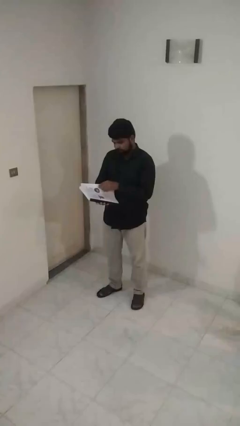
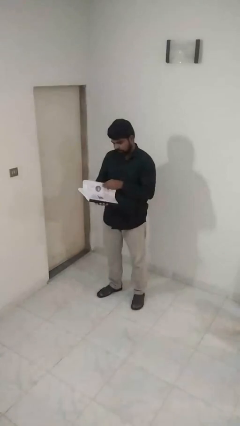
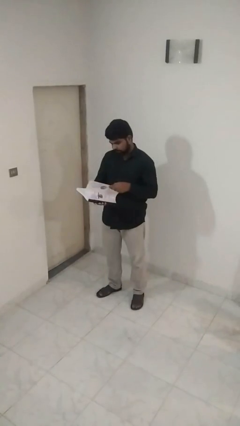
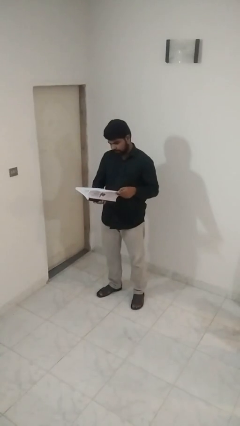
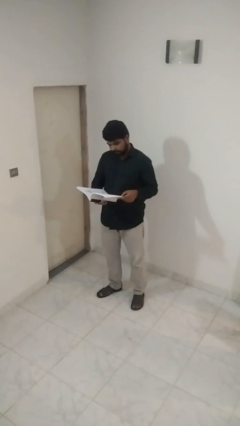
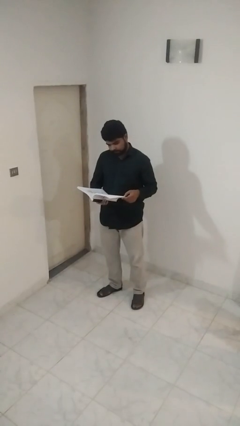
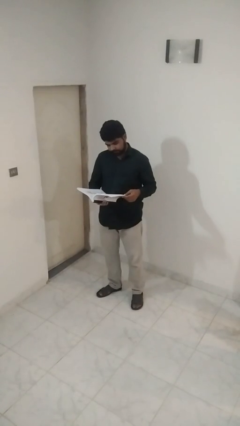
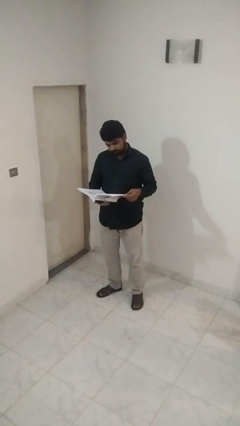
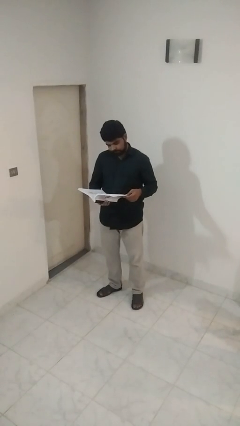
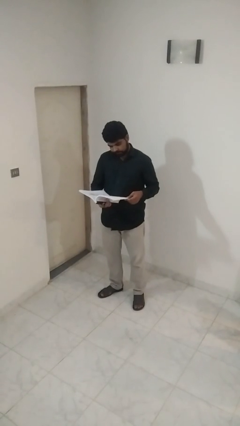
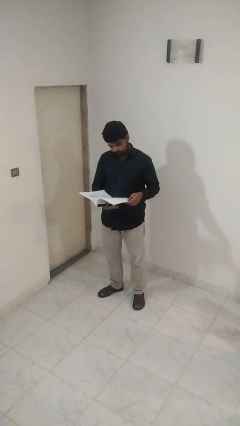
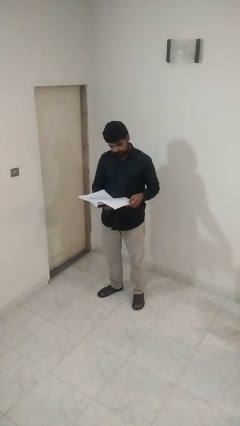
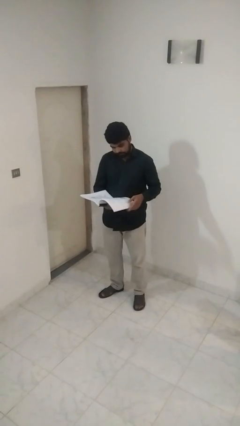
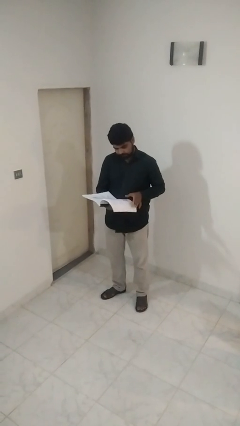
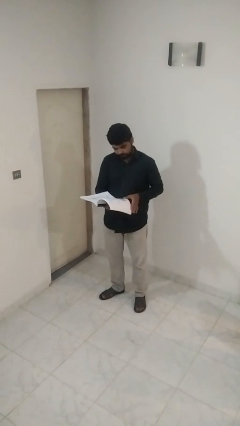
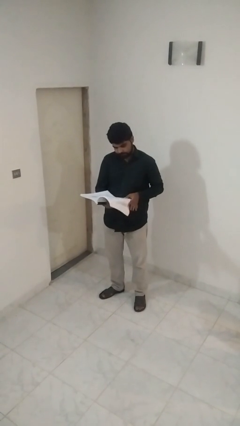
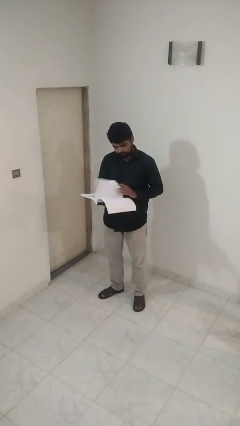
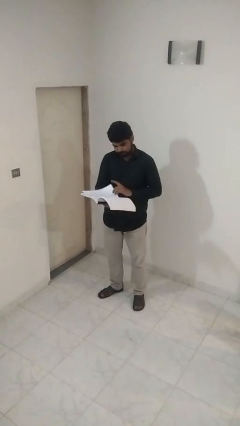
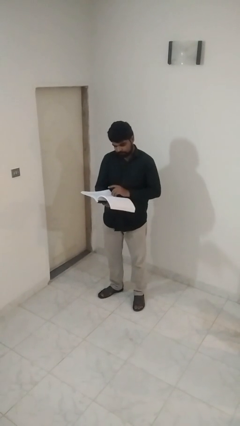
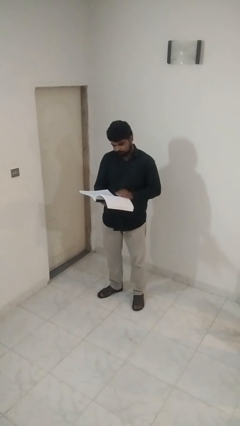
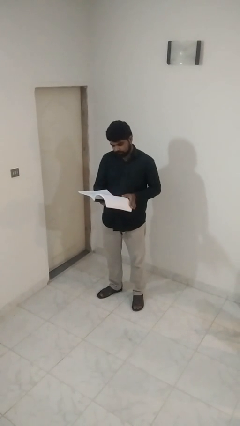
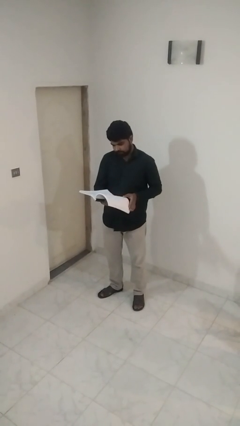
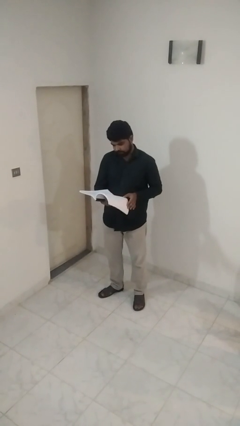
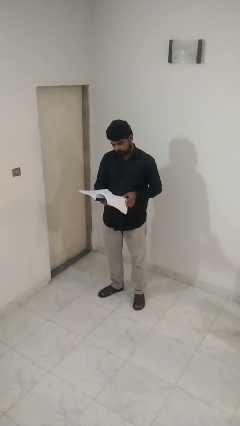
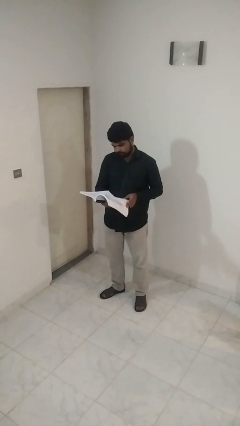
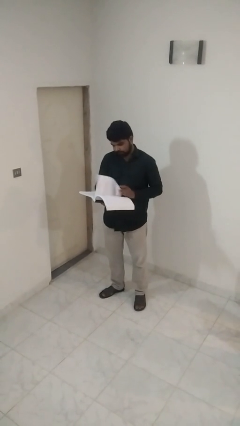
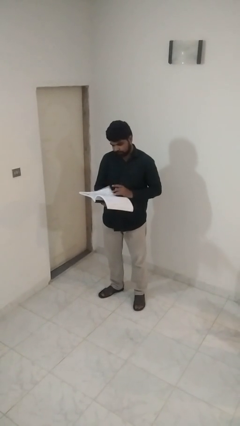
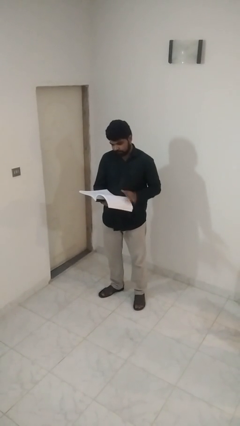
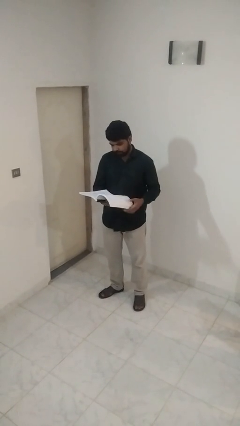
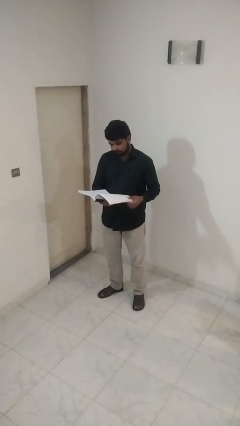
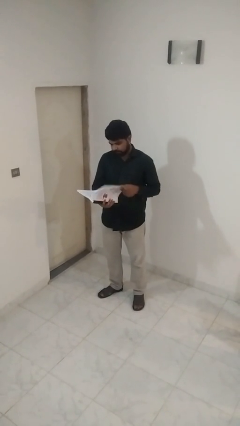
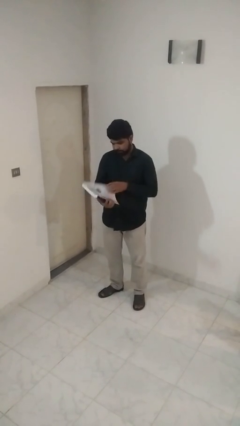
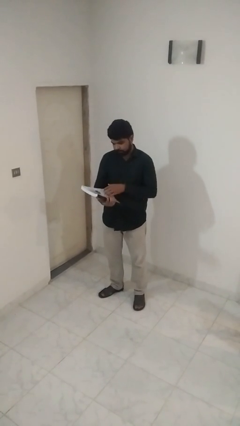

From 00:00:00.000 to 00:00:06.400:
person reads book

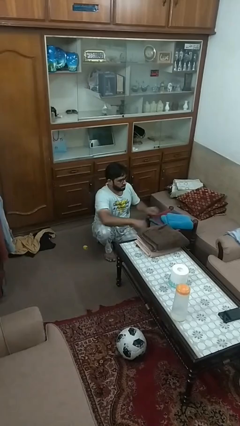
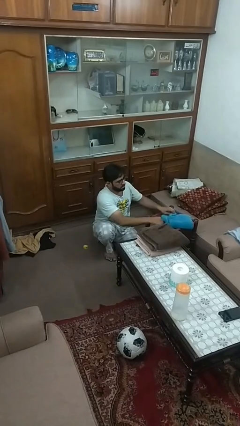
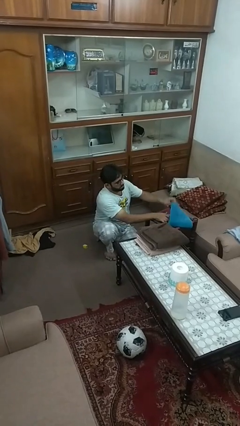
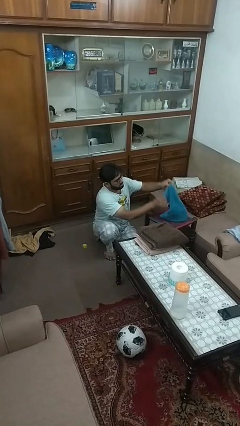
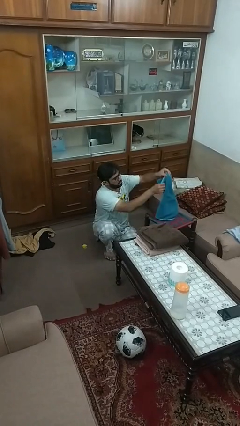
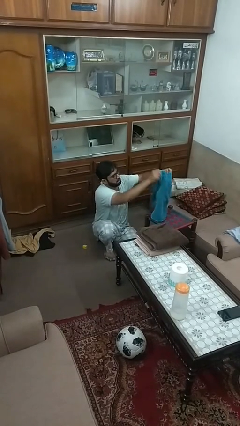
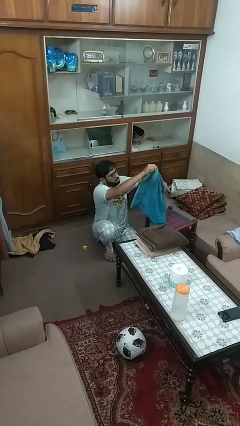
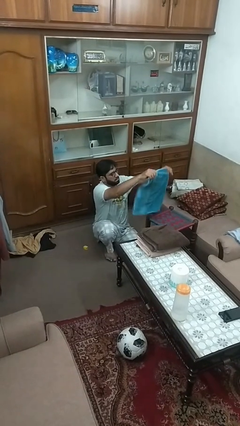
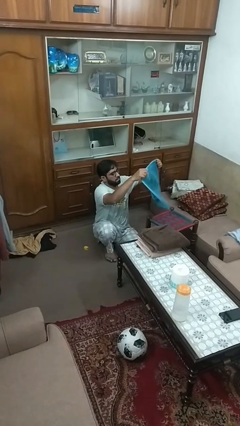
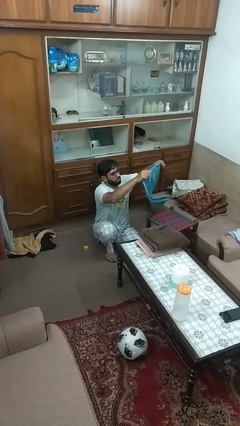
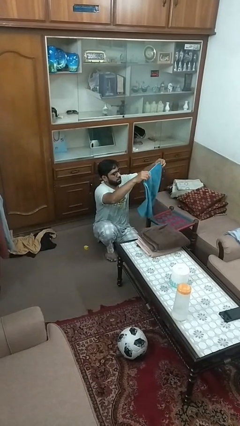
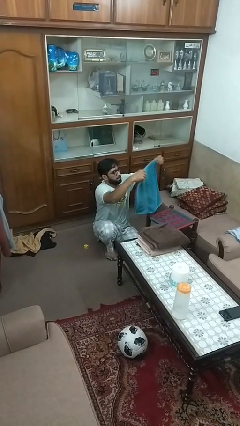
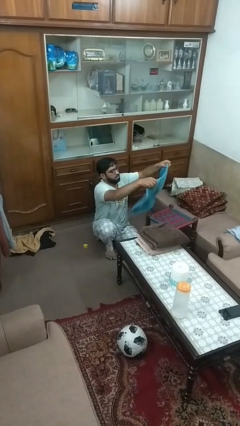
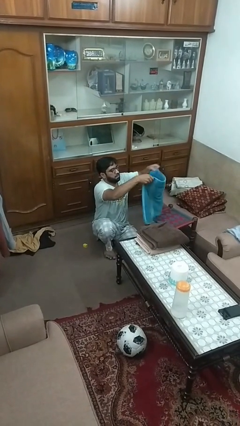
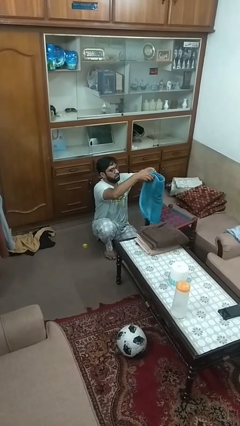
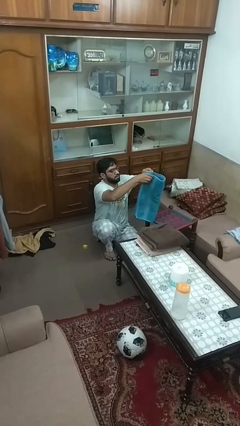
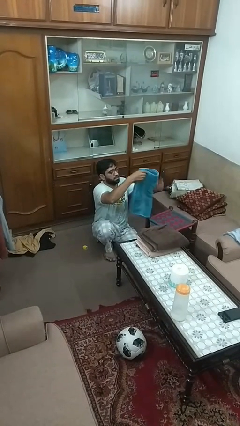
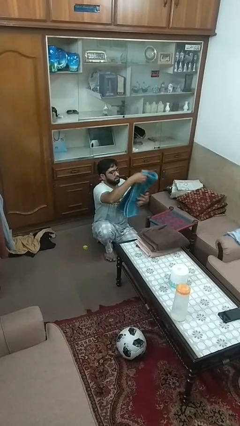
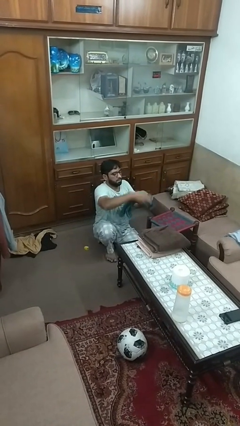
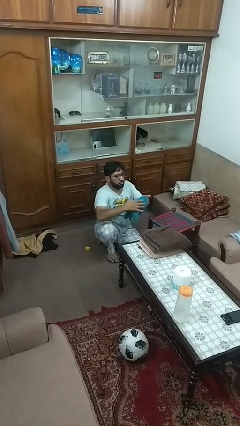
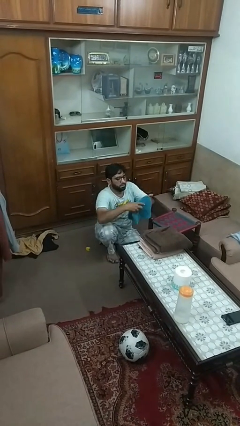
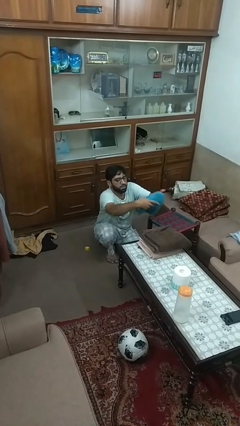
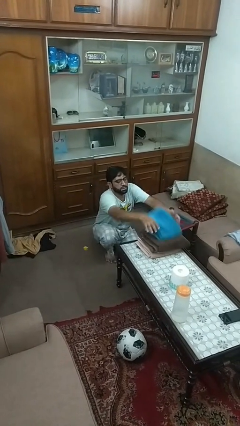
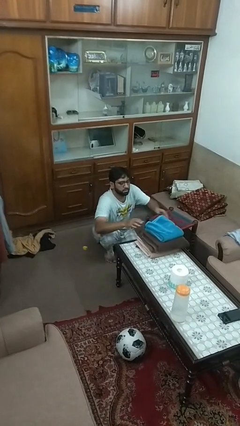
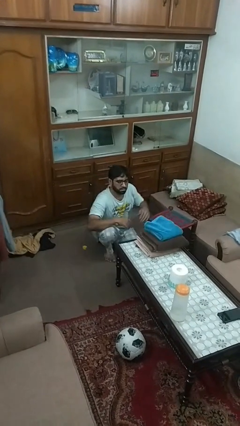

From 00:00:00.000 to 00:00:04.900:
person folds towel

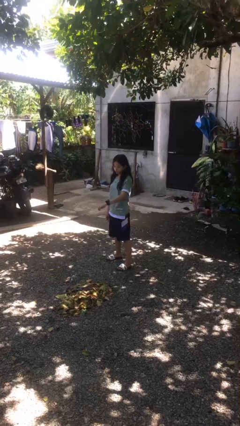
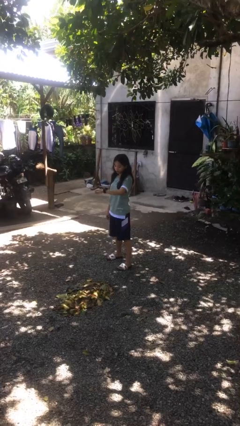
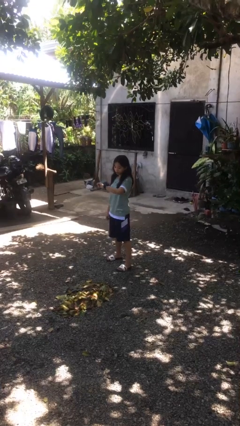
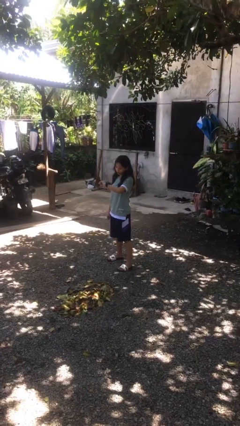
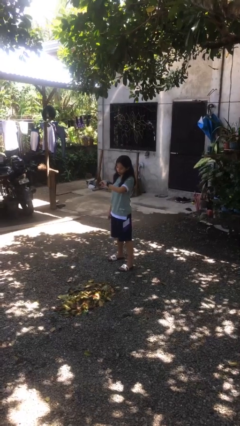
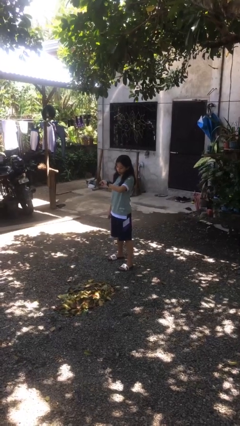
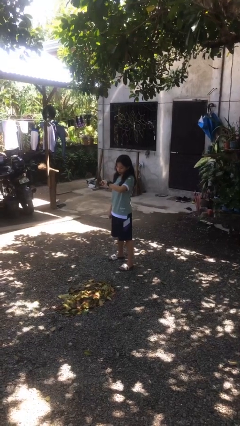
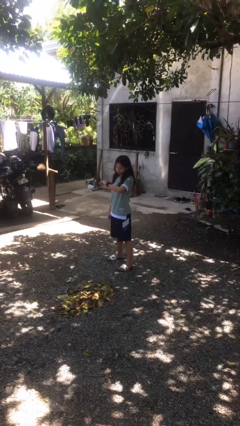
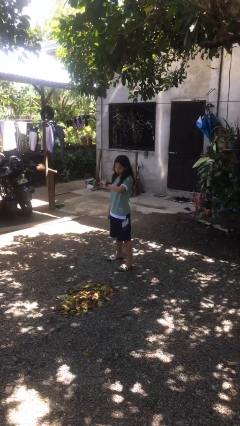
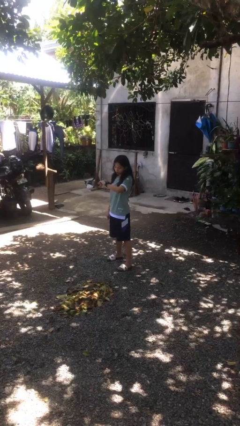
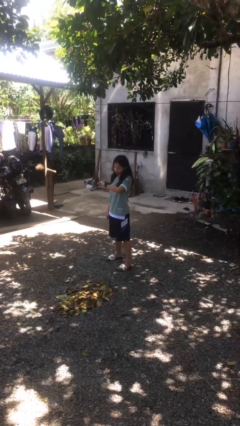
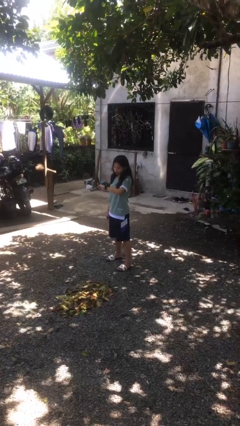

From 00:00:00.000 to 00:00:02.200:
person looks at wristwatch

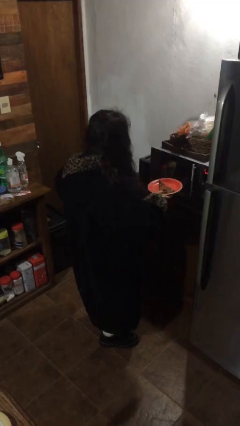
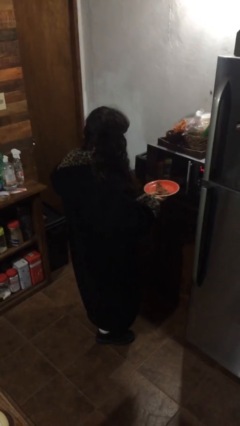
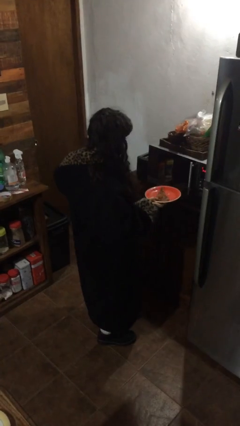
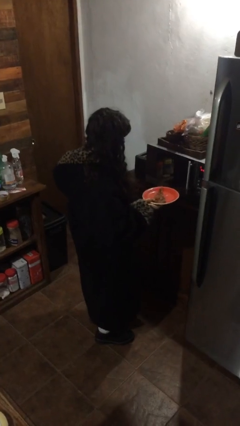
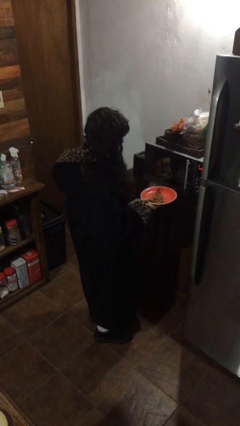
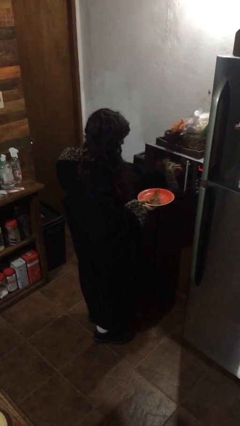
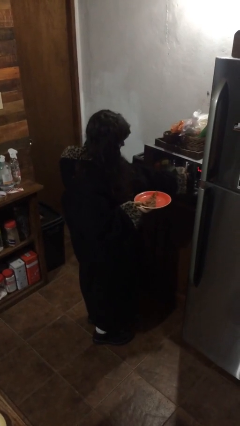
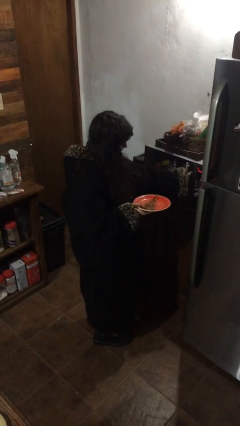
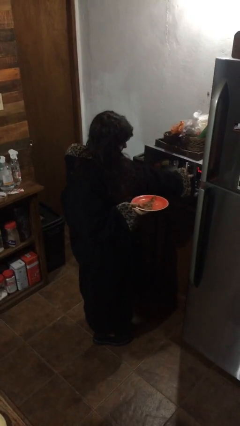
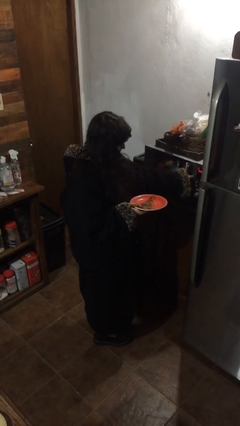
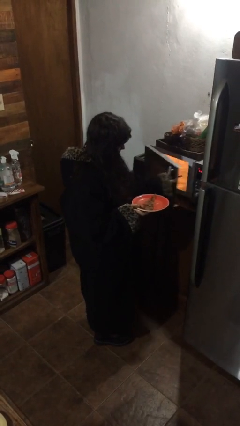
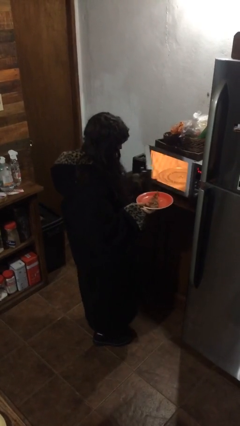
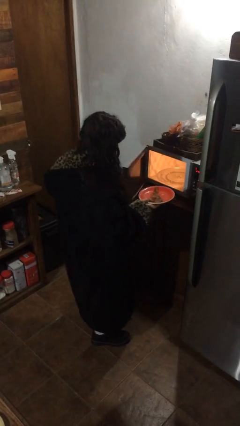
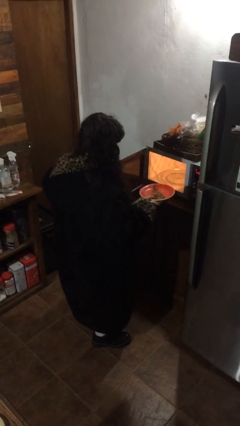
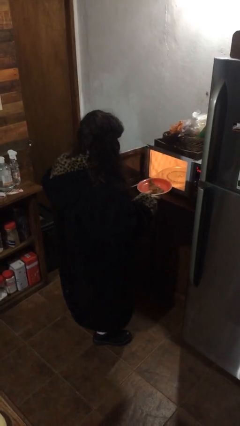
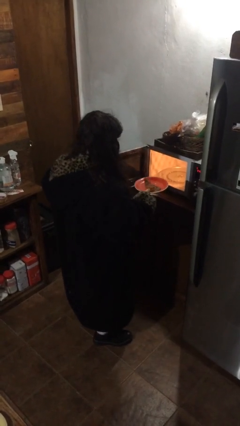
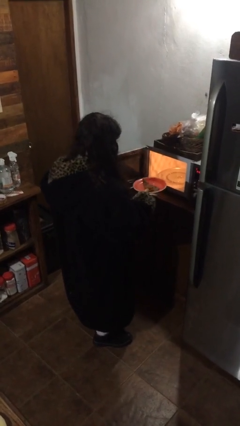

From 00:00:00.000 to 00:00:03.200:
person opens microwave

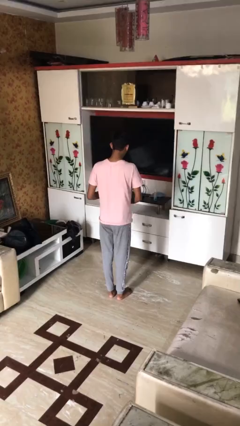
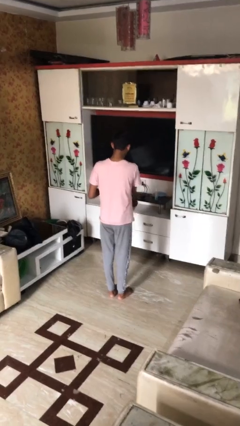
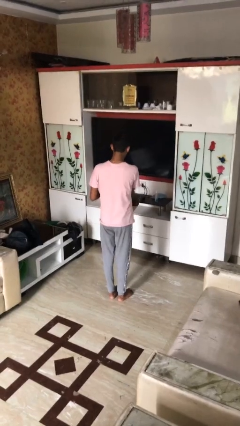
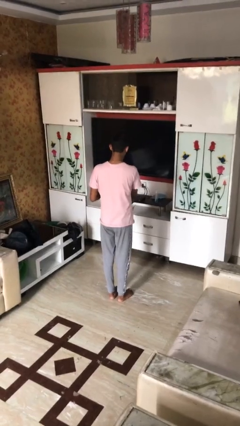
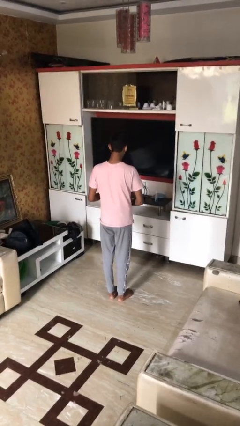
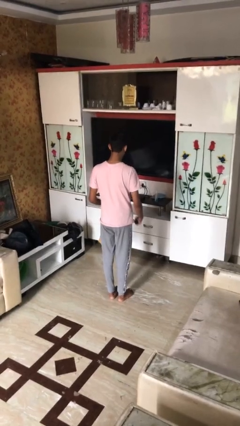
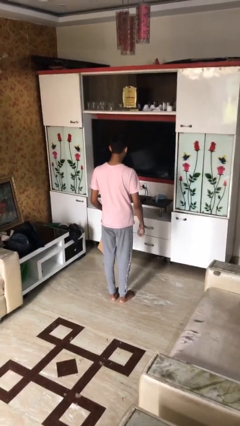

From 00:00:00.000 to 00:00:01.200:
person puts object into bag
